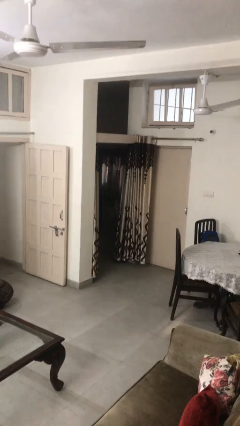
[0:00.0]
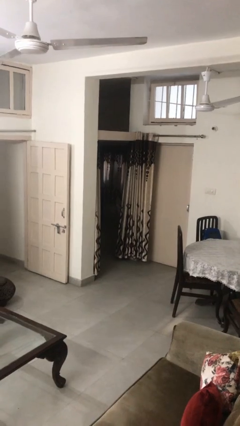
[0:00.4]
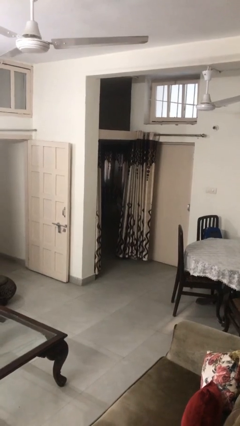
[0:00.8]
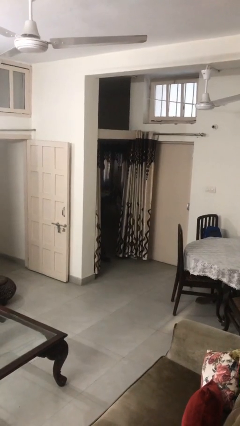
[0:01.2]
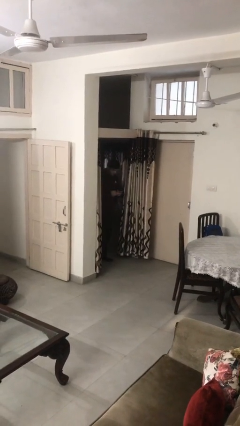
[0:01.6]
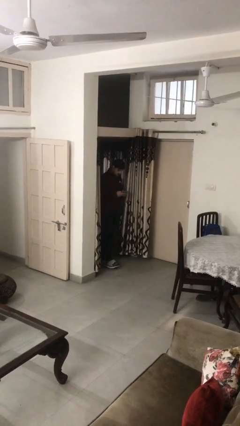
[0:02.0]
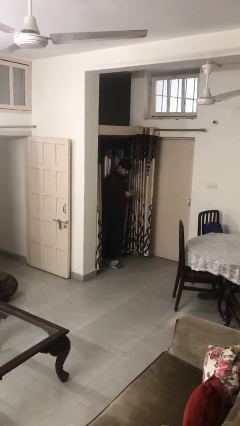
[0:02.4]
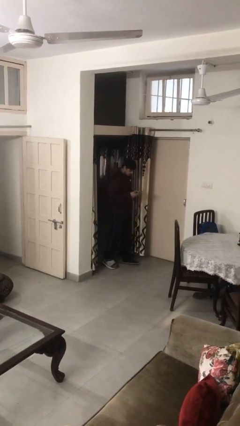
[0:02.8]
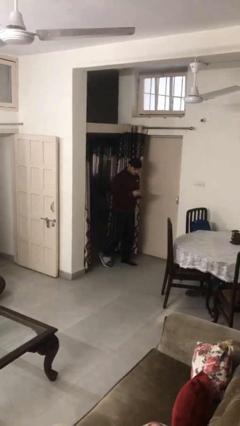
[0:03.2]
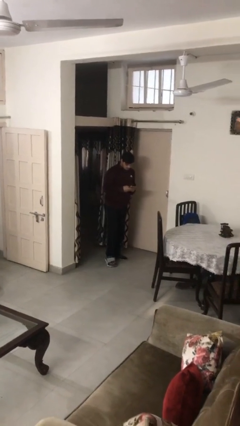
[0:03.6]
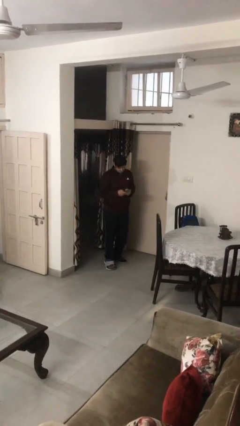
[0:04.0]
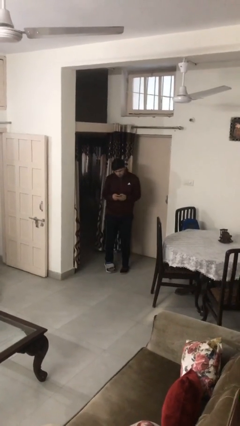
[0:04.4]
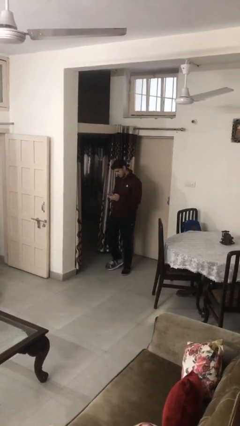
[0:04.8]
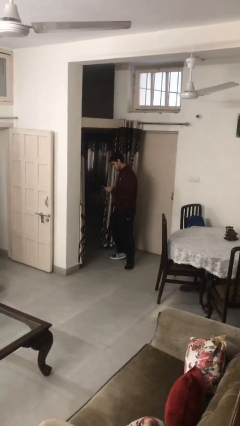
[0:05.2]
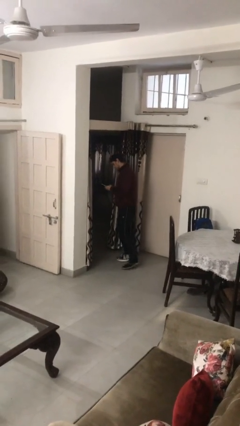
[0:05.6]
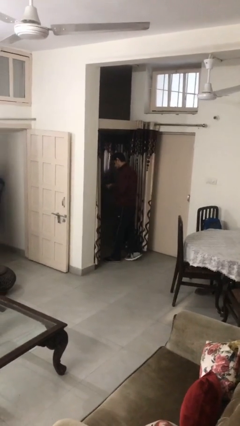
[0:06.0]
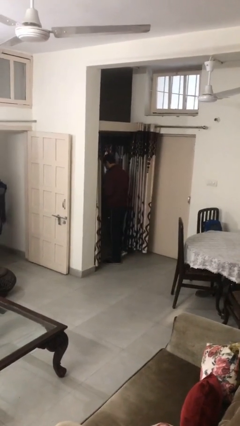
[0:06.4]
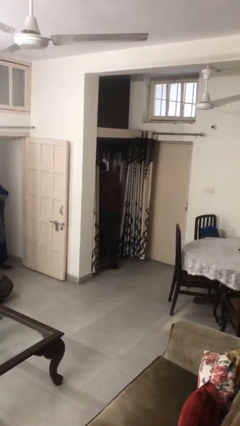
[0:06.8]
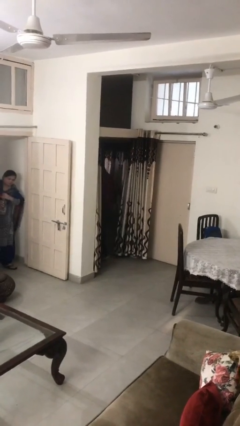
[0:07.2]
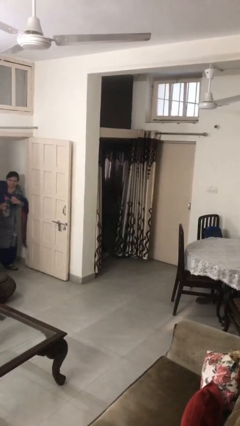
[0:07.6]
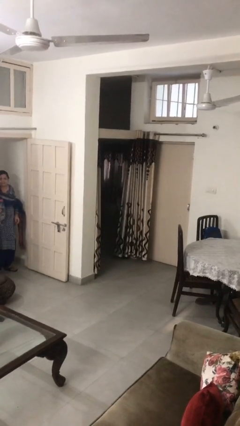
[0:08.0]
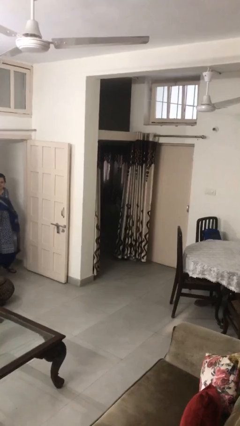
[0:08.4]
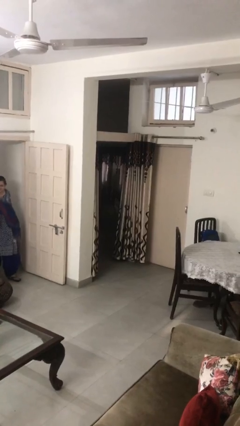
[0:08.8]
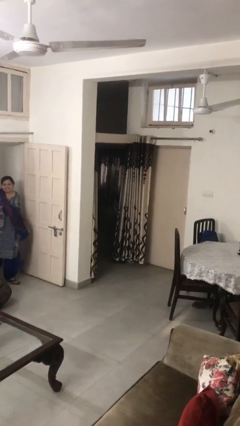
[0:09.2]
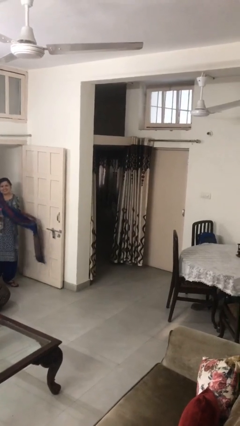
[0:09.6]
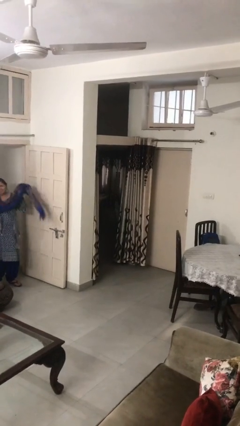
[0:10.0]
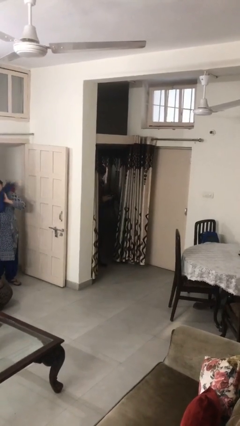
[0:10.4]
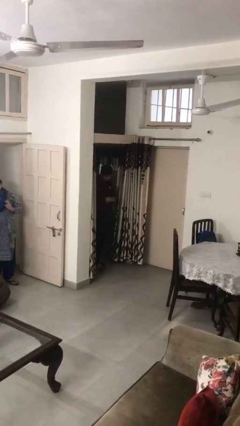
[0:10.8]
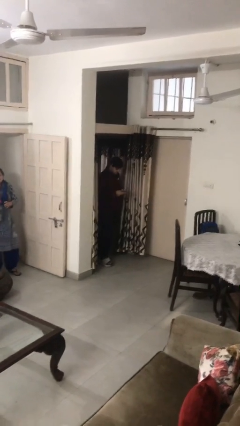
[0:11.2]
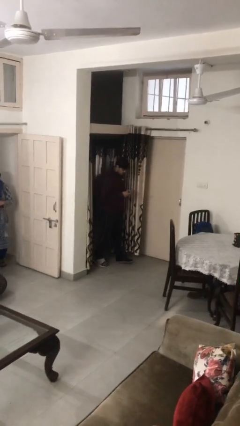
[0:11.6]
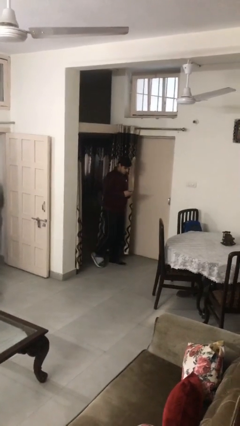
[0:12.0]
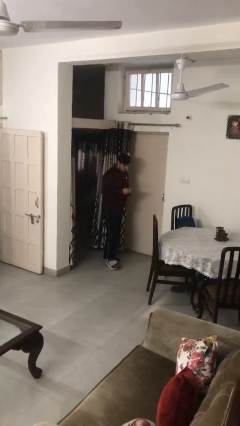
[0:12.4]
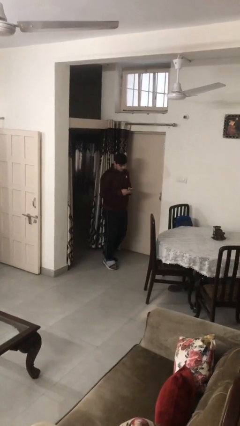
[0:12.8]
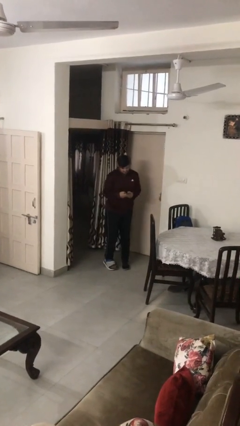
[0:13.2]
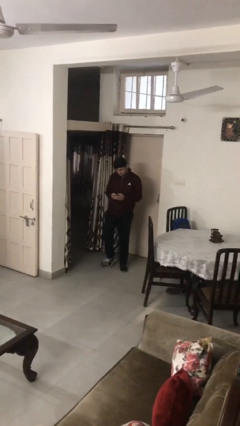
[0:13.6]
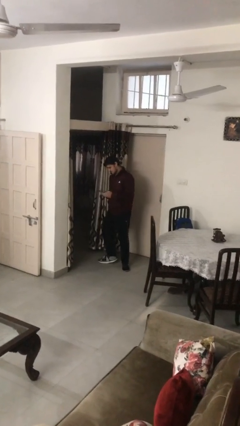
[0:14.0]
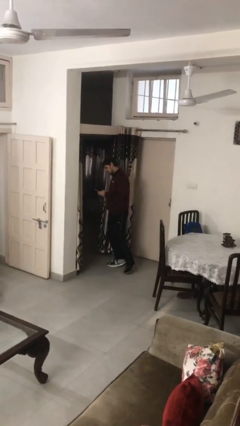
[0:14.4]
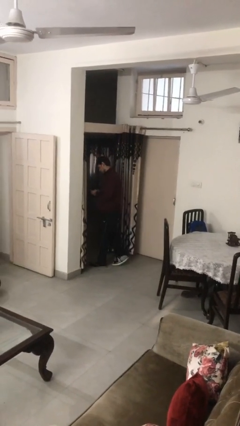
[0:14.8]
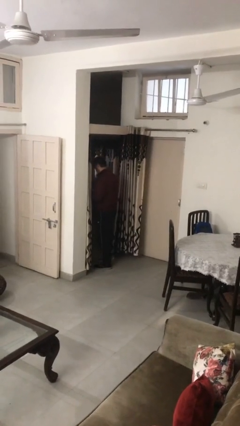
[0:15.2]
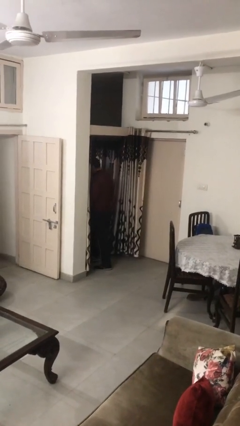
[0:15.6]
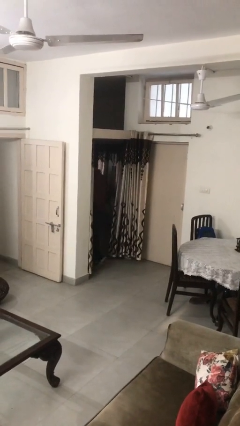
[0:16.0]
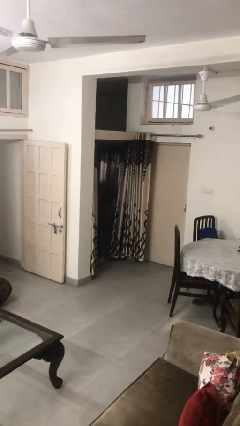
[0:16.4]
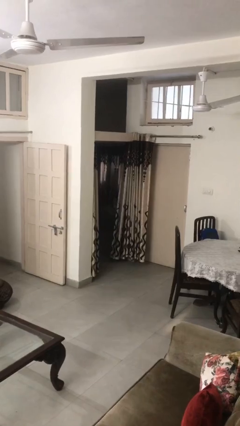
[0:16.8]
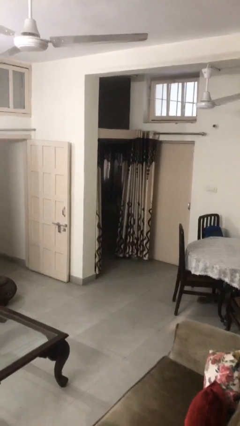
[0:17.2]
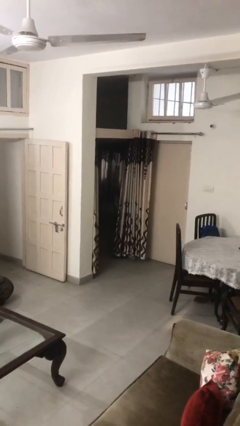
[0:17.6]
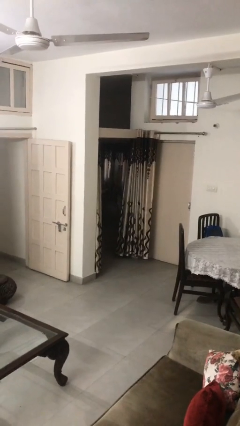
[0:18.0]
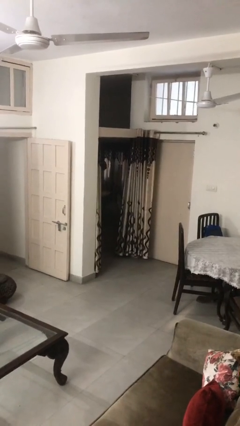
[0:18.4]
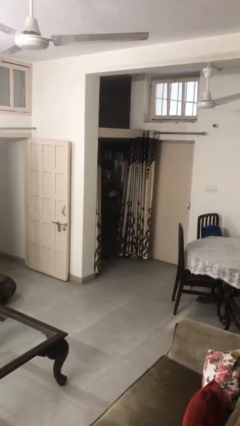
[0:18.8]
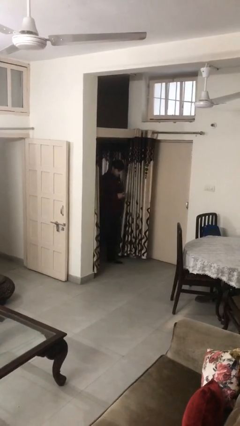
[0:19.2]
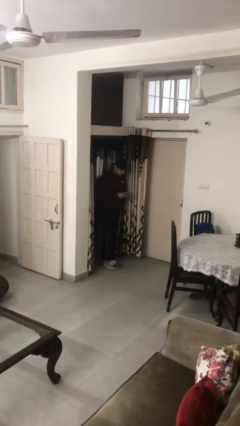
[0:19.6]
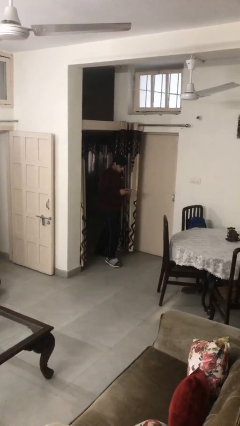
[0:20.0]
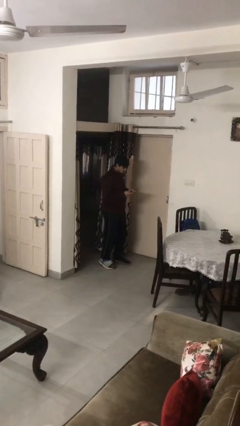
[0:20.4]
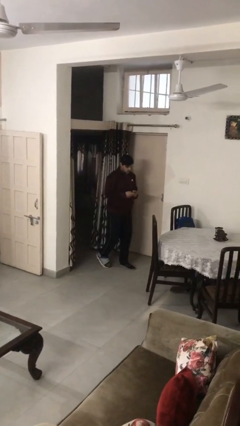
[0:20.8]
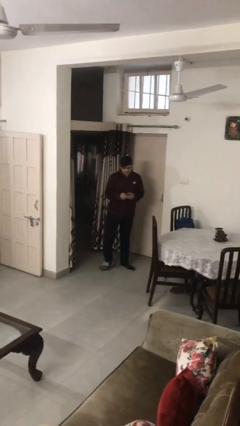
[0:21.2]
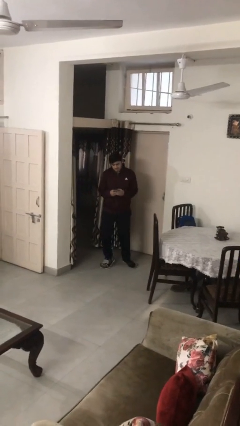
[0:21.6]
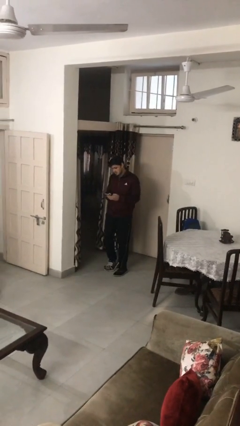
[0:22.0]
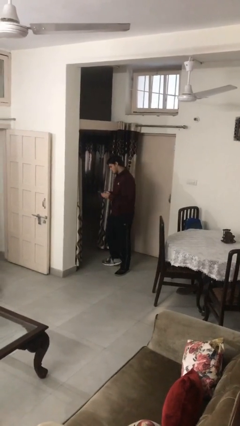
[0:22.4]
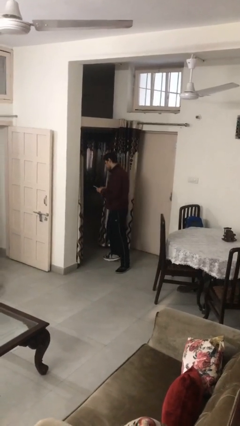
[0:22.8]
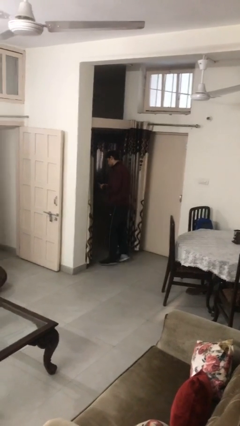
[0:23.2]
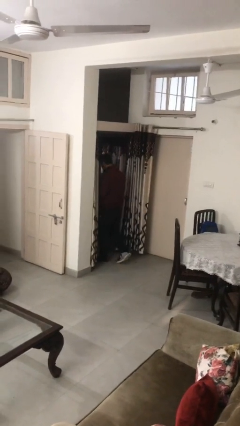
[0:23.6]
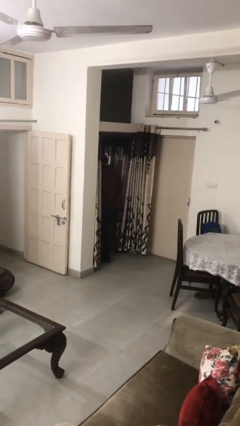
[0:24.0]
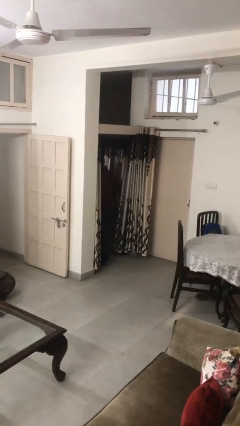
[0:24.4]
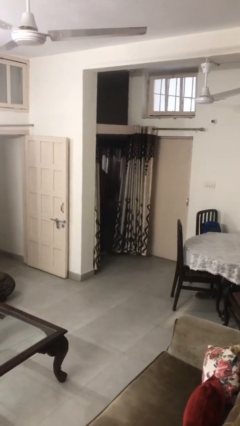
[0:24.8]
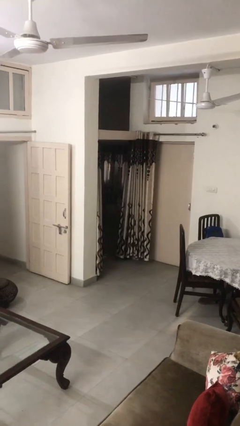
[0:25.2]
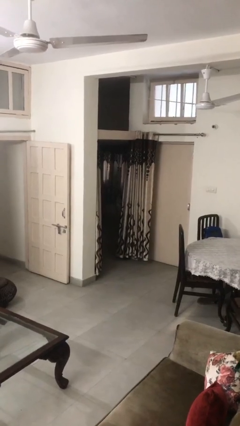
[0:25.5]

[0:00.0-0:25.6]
person texts on phone

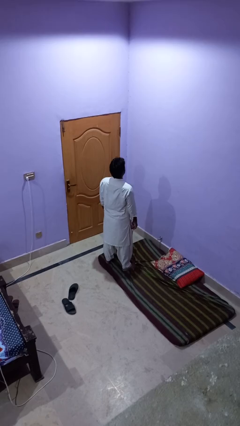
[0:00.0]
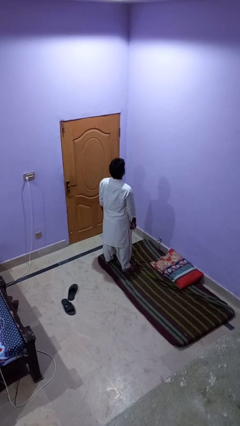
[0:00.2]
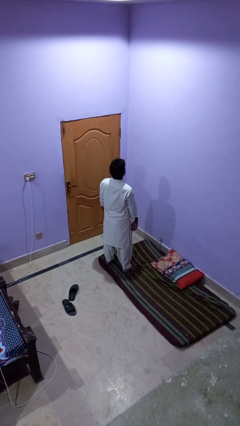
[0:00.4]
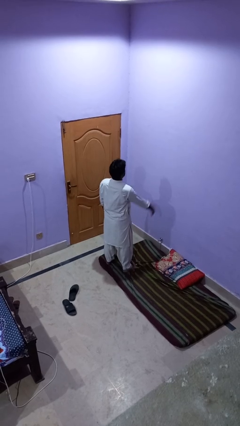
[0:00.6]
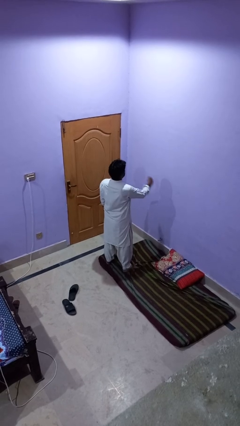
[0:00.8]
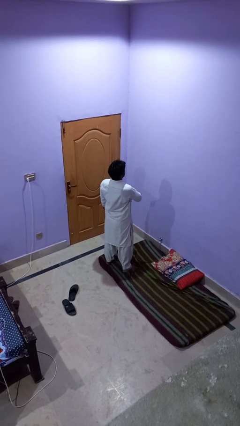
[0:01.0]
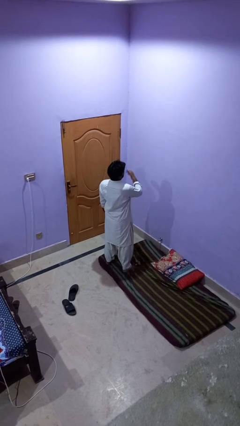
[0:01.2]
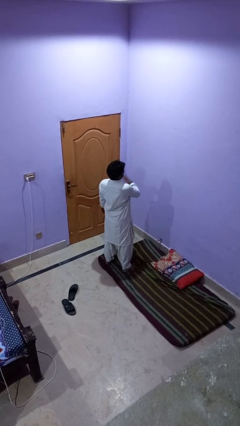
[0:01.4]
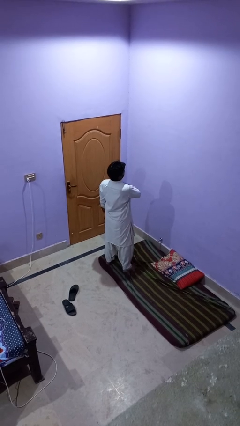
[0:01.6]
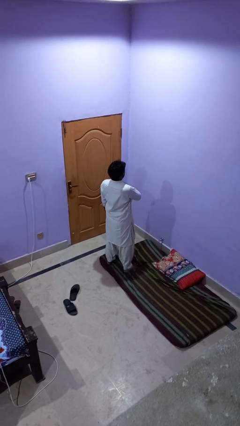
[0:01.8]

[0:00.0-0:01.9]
person drums on chest

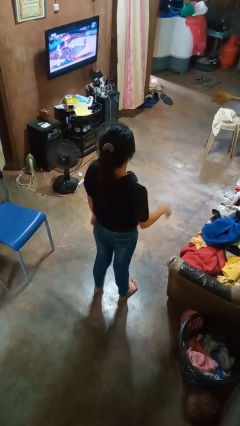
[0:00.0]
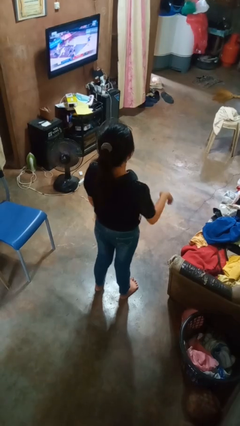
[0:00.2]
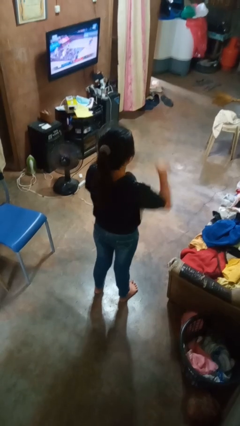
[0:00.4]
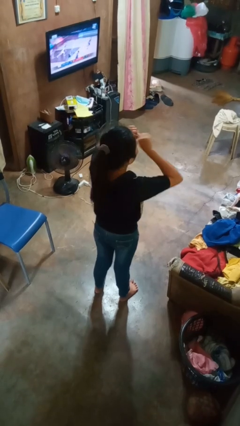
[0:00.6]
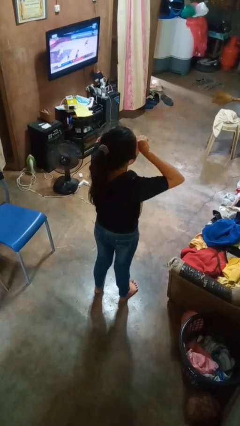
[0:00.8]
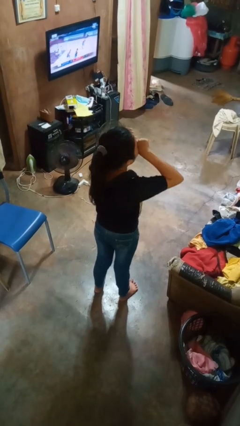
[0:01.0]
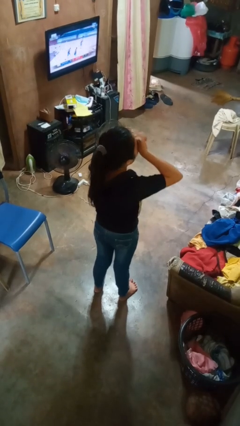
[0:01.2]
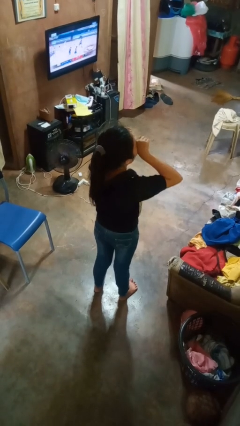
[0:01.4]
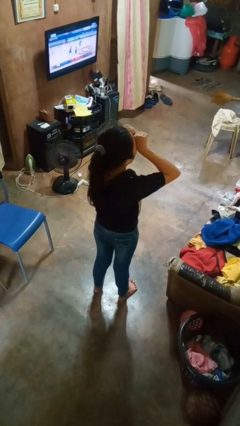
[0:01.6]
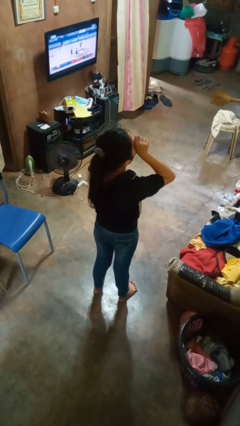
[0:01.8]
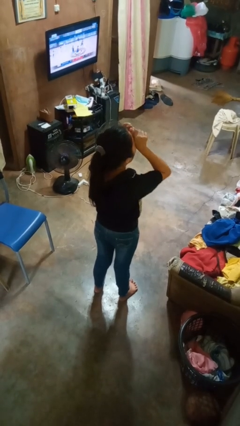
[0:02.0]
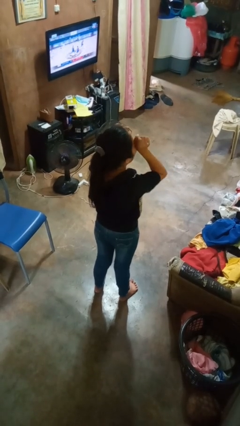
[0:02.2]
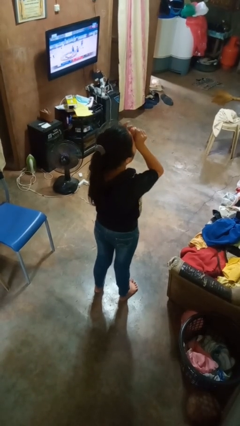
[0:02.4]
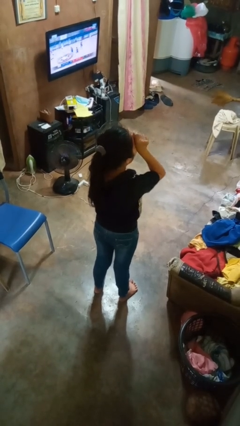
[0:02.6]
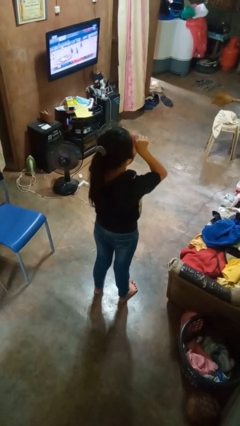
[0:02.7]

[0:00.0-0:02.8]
person rubs eyes

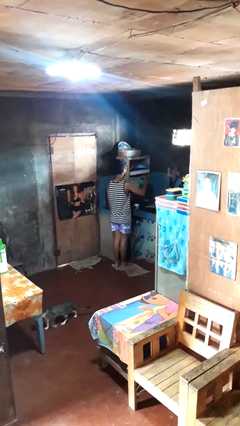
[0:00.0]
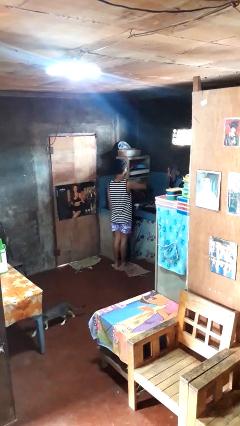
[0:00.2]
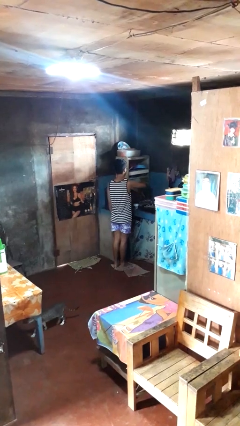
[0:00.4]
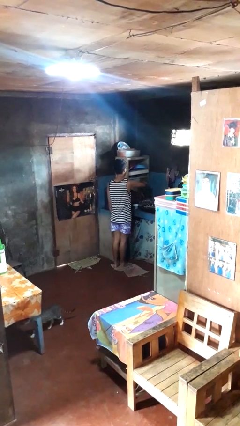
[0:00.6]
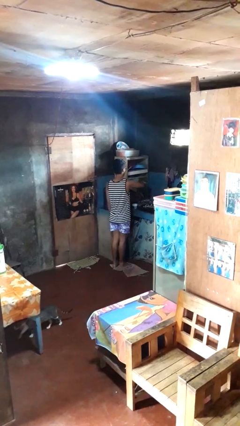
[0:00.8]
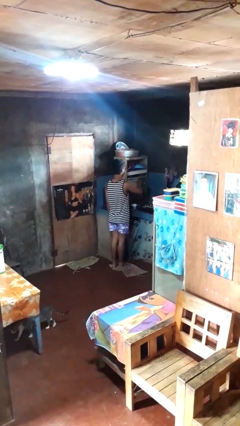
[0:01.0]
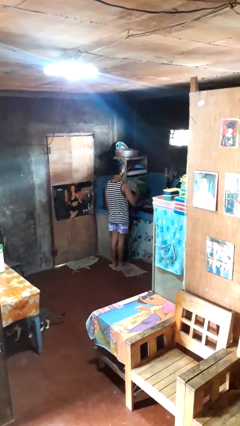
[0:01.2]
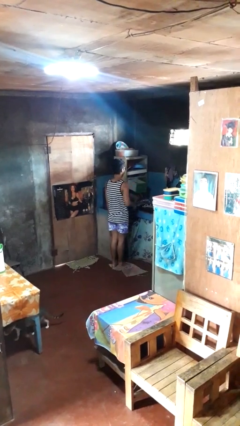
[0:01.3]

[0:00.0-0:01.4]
person puts object into kitchen drawer
